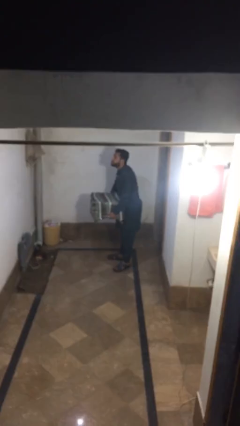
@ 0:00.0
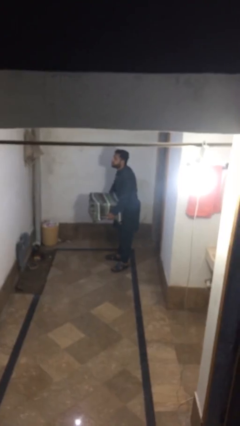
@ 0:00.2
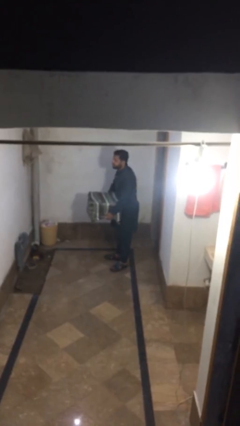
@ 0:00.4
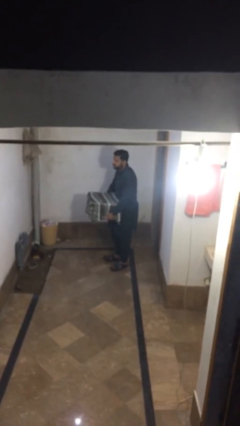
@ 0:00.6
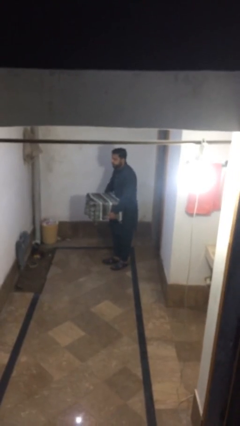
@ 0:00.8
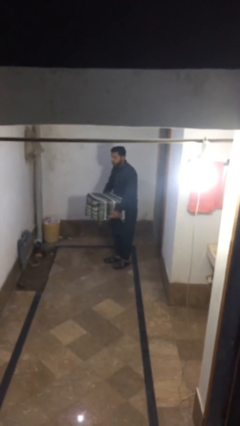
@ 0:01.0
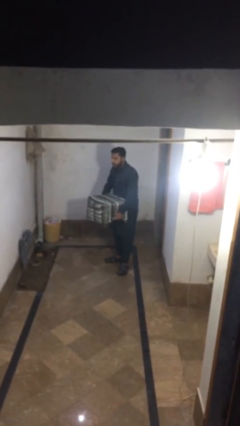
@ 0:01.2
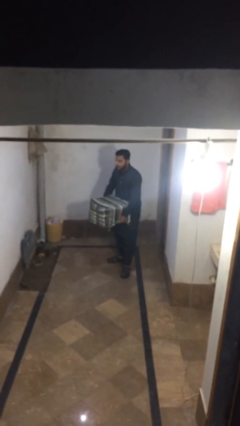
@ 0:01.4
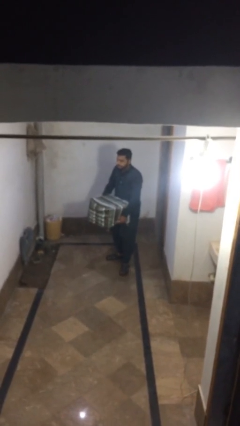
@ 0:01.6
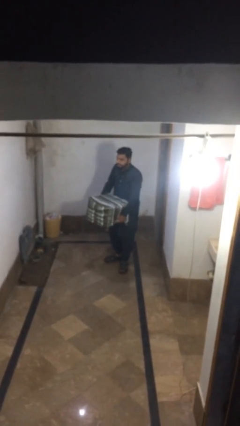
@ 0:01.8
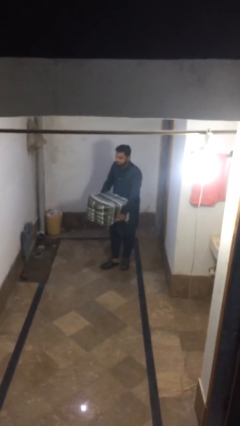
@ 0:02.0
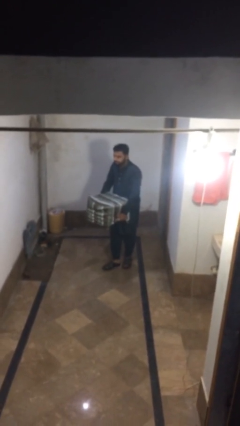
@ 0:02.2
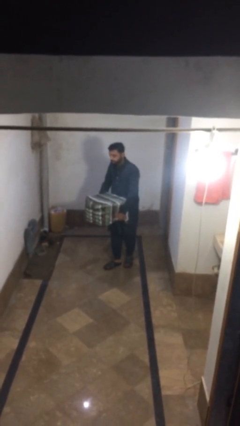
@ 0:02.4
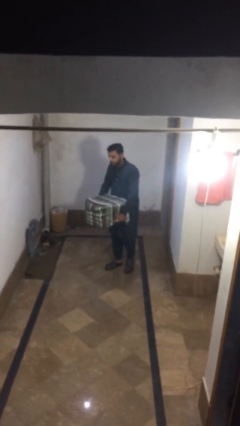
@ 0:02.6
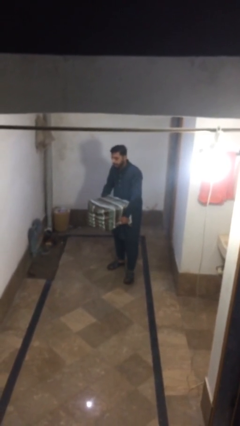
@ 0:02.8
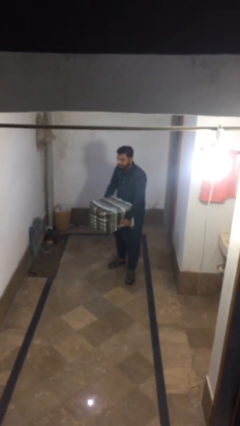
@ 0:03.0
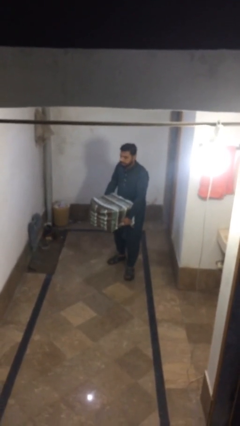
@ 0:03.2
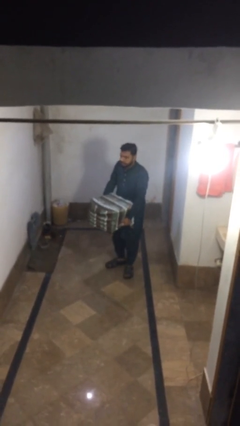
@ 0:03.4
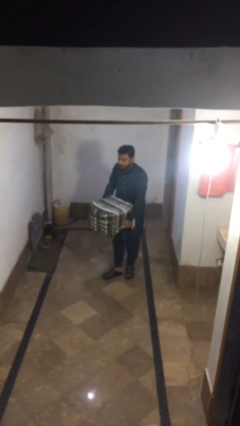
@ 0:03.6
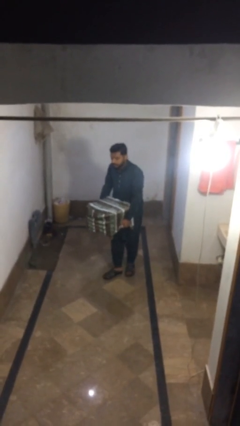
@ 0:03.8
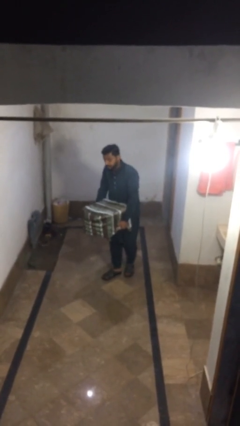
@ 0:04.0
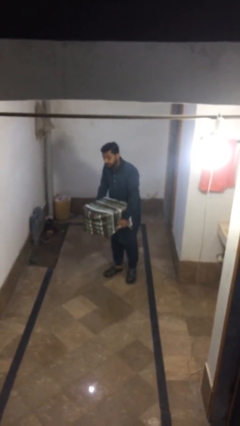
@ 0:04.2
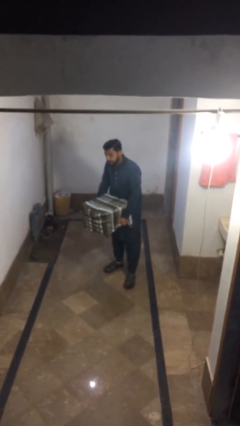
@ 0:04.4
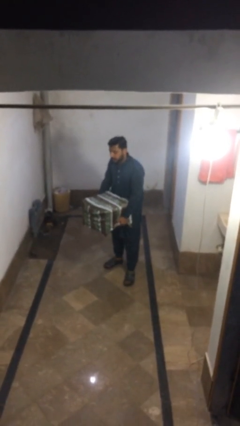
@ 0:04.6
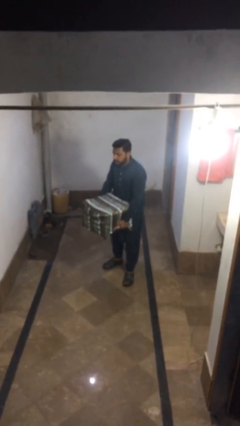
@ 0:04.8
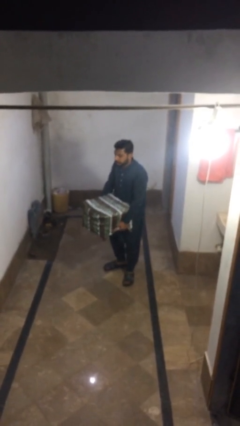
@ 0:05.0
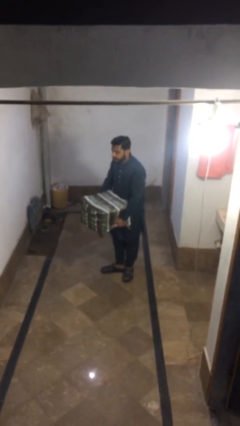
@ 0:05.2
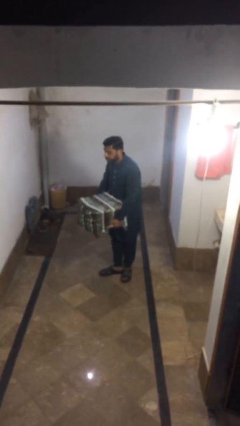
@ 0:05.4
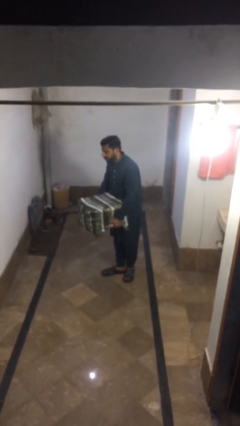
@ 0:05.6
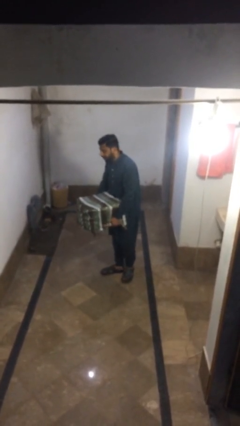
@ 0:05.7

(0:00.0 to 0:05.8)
person carries heavy object

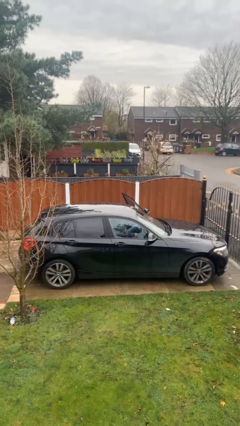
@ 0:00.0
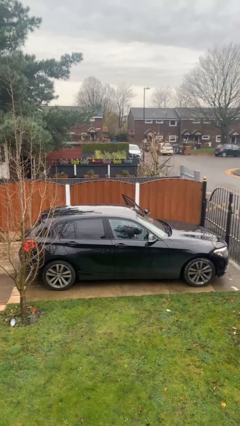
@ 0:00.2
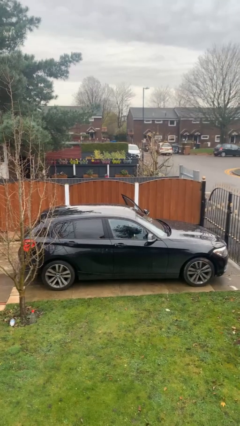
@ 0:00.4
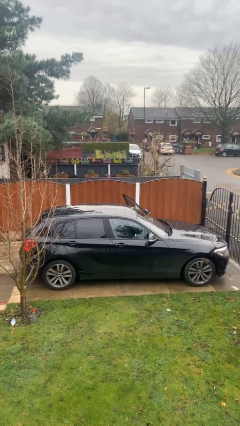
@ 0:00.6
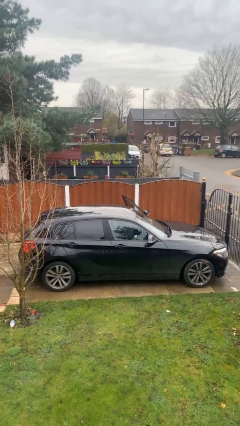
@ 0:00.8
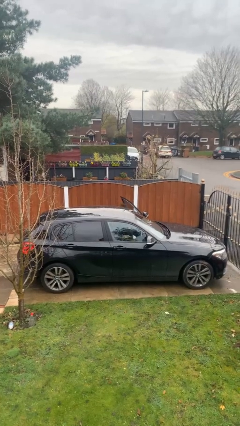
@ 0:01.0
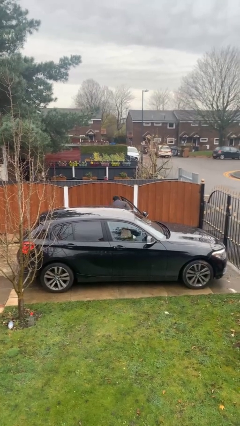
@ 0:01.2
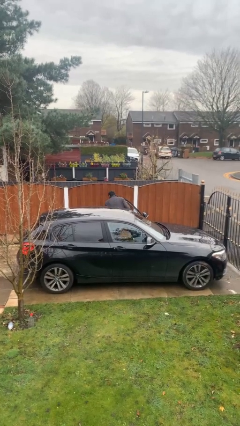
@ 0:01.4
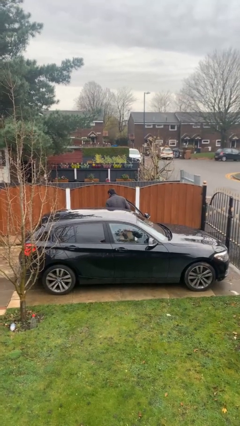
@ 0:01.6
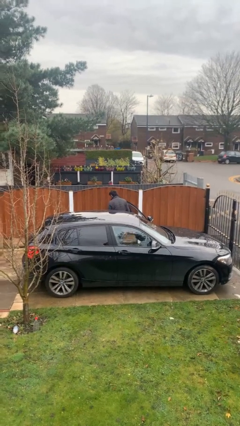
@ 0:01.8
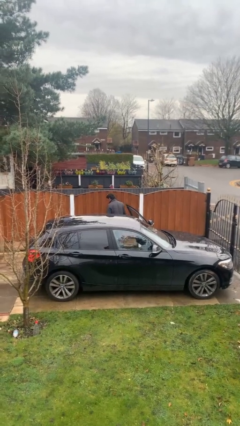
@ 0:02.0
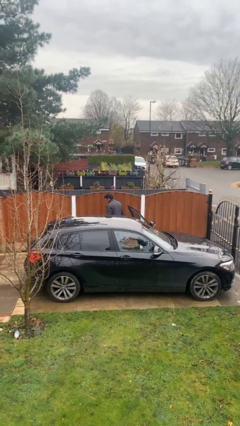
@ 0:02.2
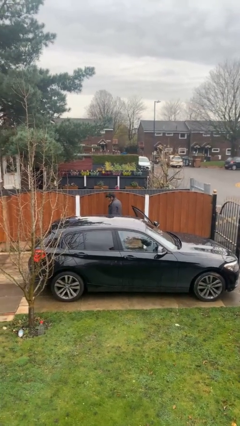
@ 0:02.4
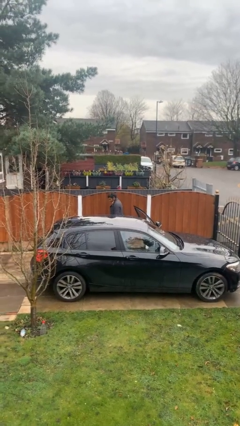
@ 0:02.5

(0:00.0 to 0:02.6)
person exits car

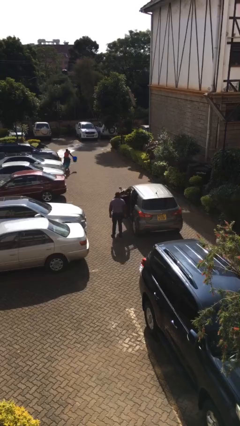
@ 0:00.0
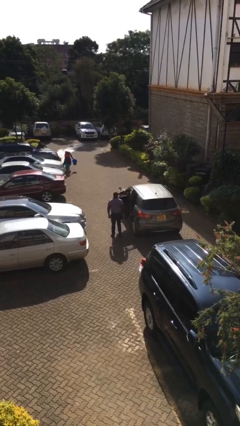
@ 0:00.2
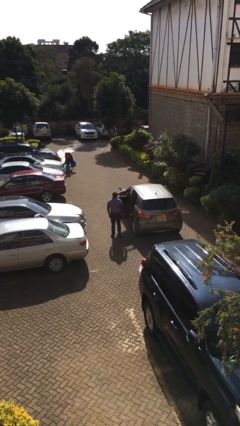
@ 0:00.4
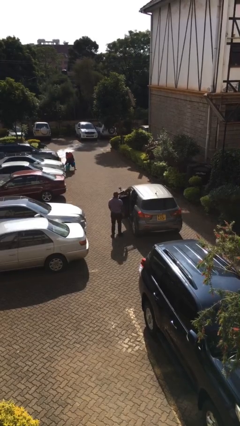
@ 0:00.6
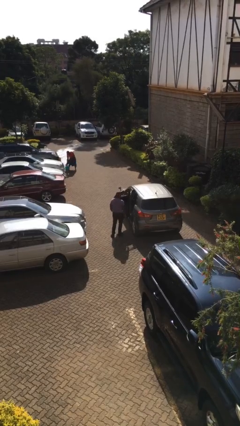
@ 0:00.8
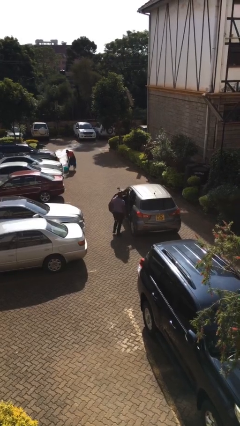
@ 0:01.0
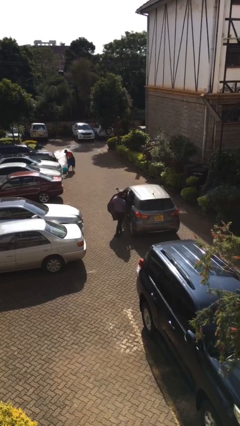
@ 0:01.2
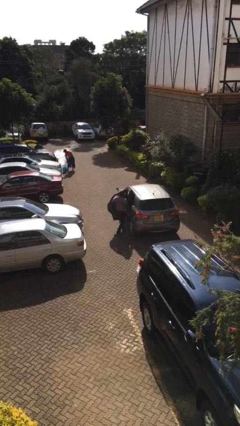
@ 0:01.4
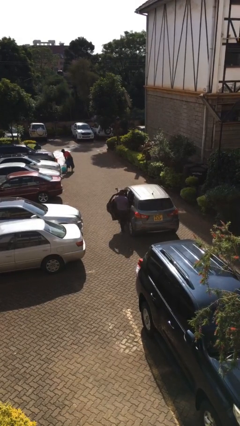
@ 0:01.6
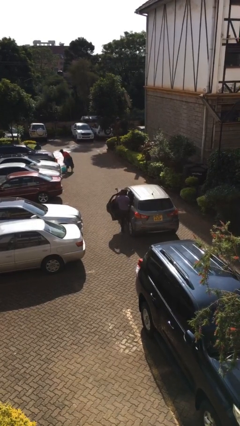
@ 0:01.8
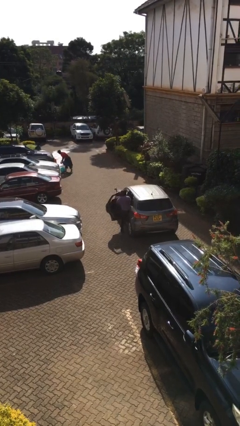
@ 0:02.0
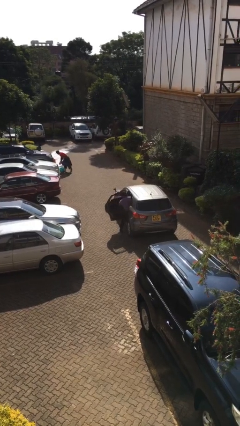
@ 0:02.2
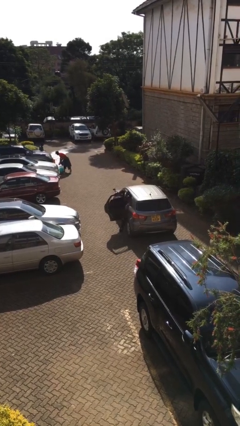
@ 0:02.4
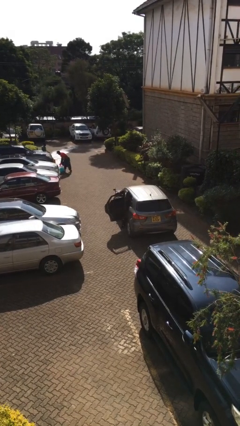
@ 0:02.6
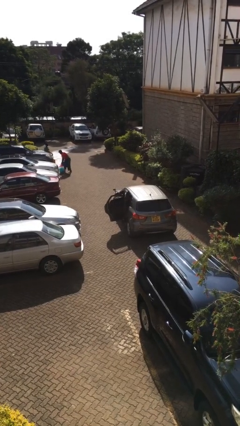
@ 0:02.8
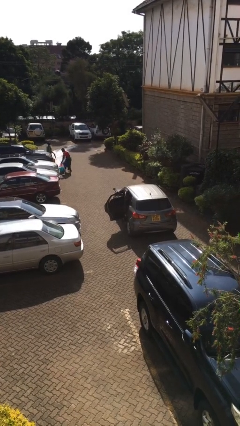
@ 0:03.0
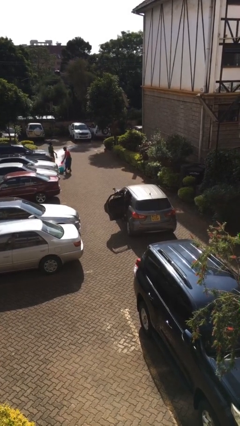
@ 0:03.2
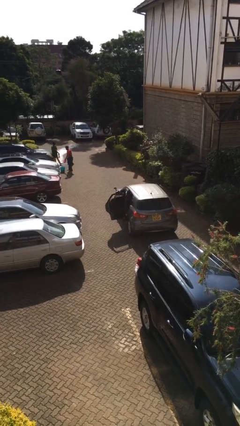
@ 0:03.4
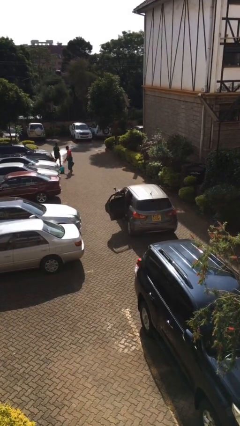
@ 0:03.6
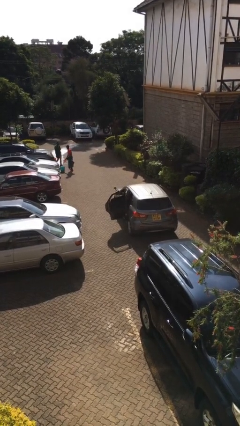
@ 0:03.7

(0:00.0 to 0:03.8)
person enters car

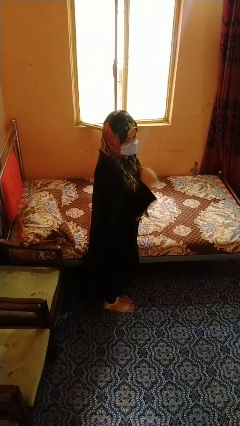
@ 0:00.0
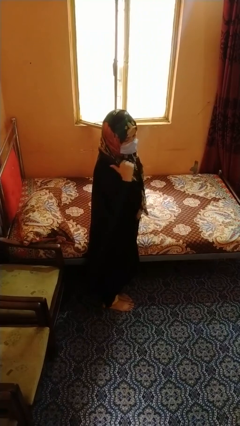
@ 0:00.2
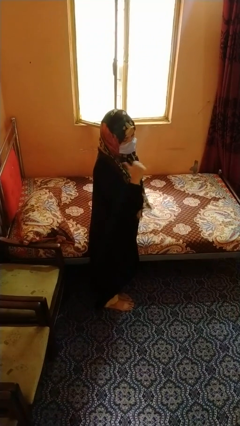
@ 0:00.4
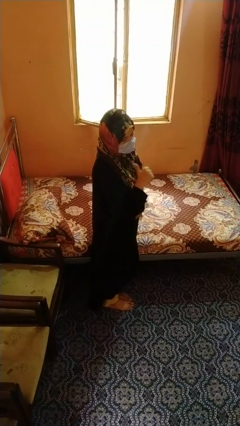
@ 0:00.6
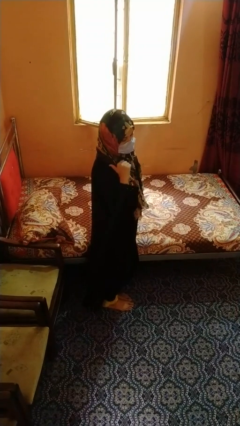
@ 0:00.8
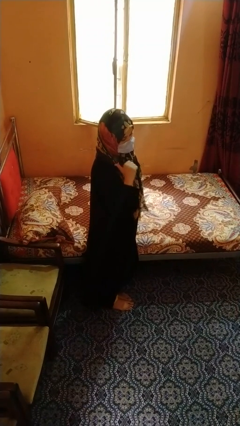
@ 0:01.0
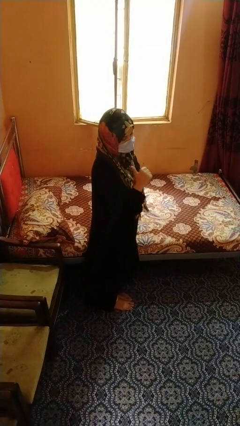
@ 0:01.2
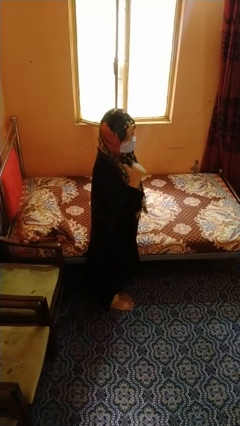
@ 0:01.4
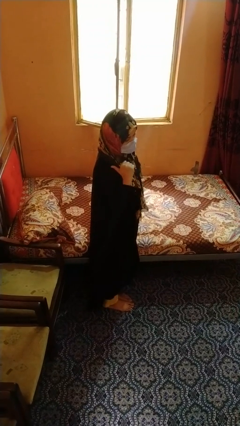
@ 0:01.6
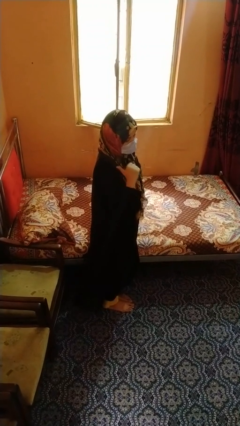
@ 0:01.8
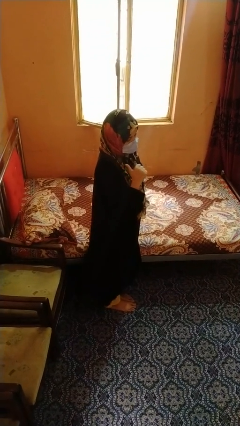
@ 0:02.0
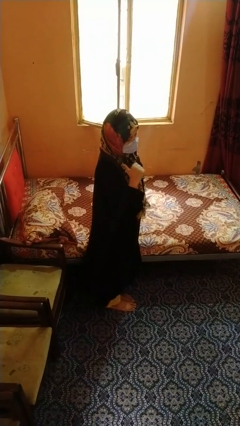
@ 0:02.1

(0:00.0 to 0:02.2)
person gestures behind me

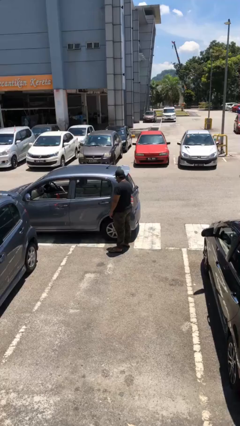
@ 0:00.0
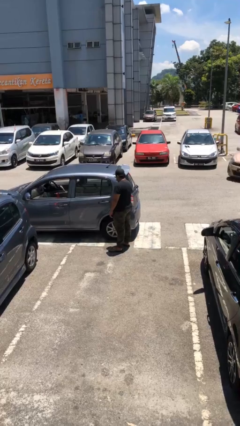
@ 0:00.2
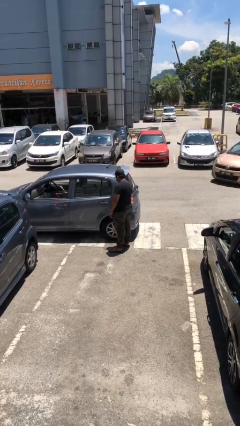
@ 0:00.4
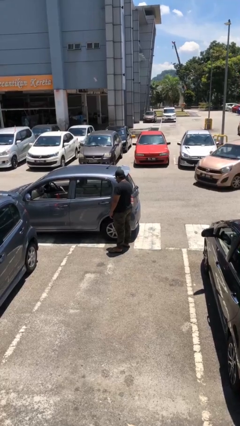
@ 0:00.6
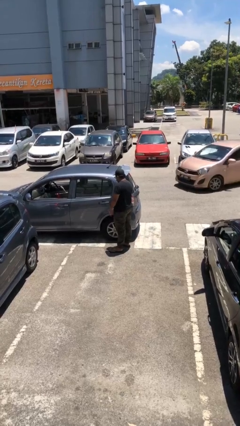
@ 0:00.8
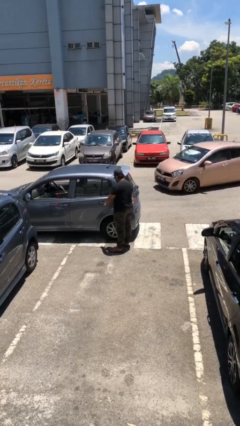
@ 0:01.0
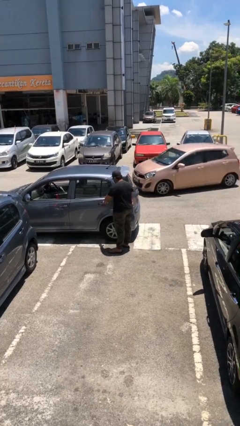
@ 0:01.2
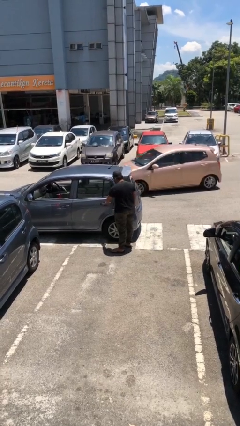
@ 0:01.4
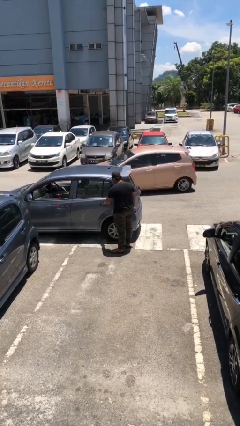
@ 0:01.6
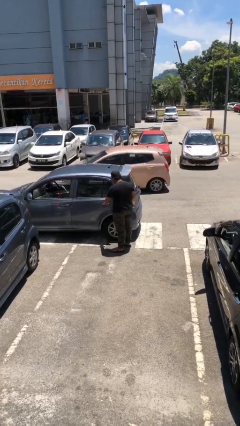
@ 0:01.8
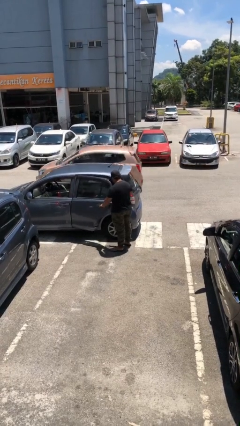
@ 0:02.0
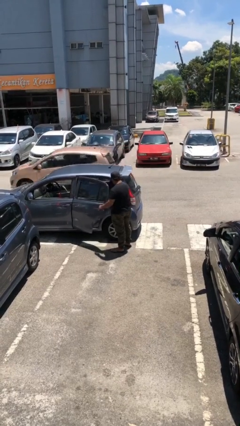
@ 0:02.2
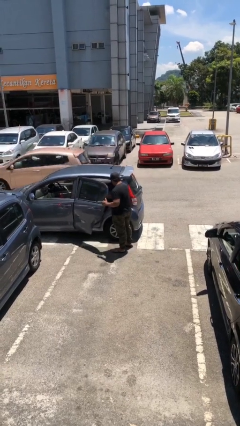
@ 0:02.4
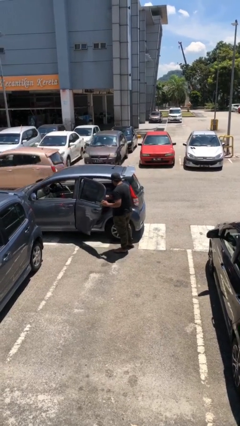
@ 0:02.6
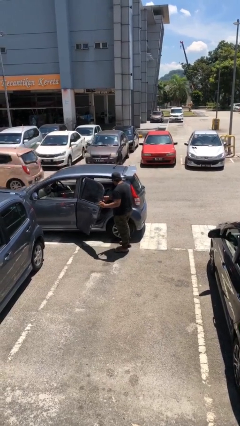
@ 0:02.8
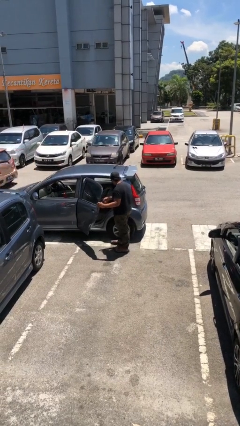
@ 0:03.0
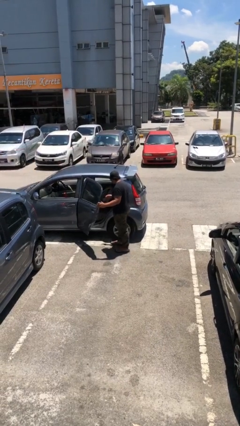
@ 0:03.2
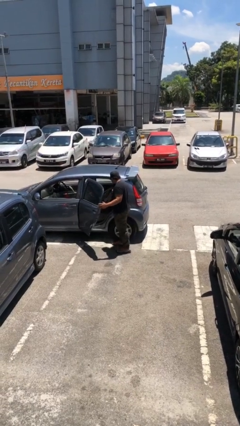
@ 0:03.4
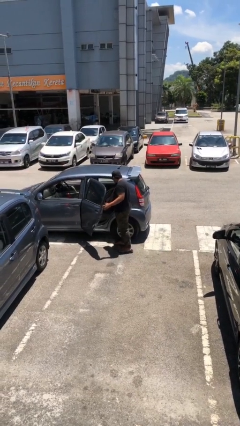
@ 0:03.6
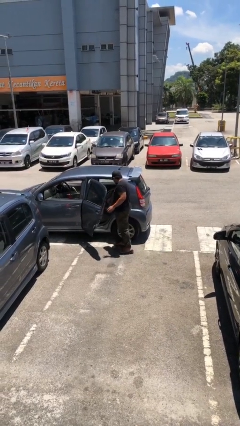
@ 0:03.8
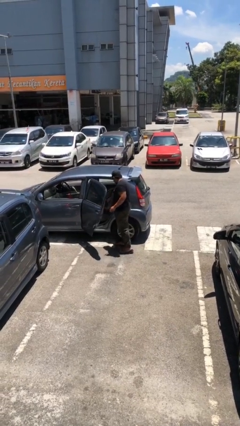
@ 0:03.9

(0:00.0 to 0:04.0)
person opens car door
